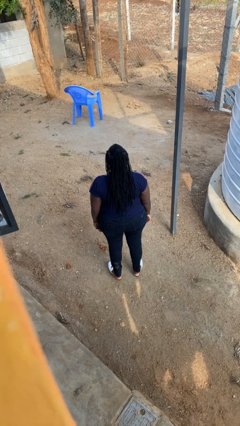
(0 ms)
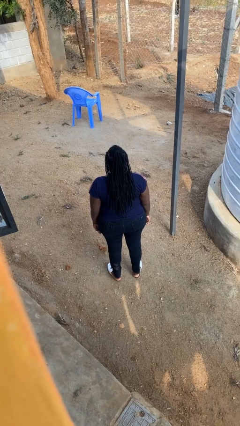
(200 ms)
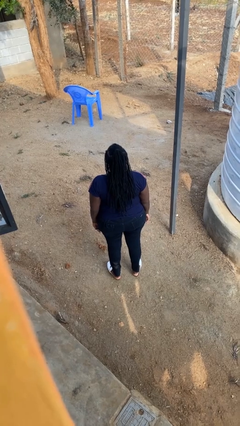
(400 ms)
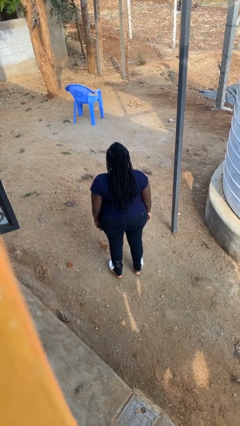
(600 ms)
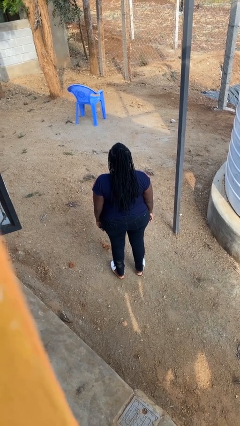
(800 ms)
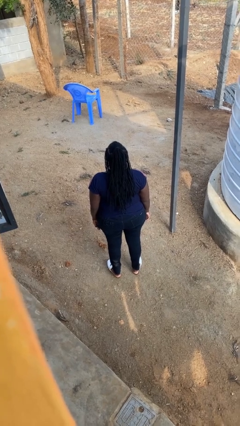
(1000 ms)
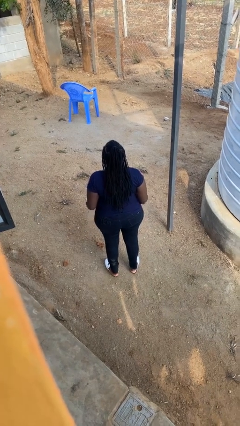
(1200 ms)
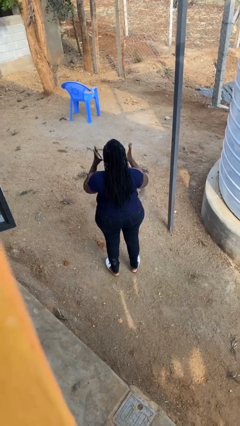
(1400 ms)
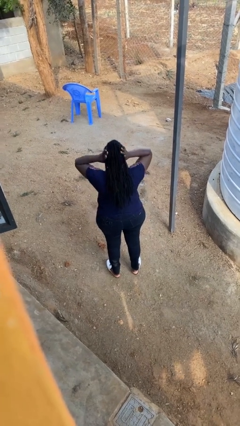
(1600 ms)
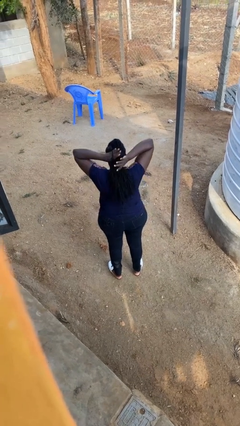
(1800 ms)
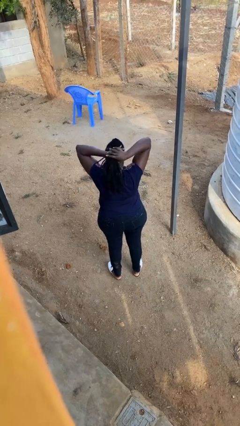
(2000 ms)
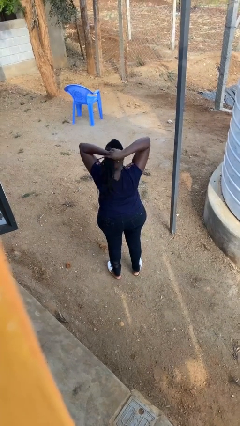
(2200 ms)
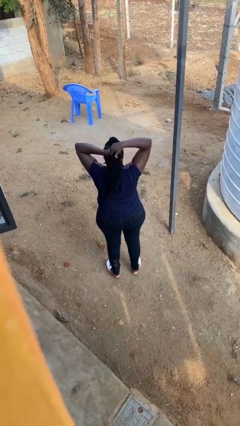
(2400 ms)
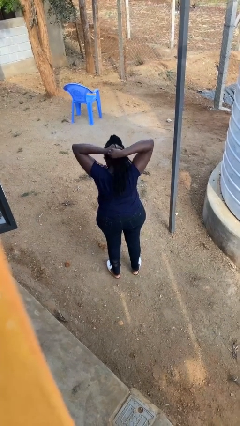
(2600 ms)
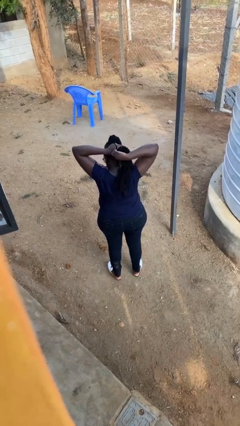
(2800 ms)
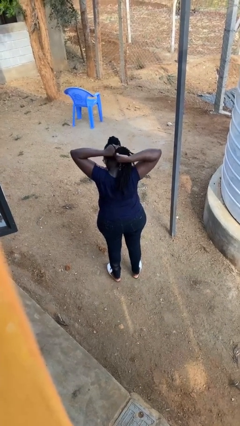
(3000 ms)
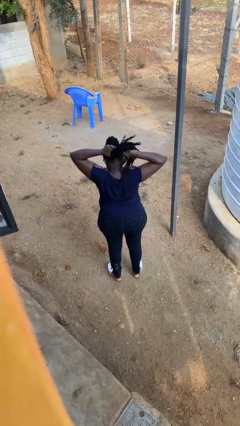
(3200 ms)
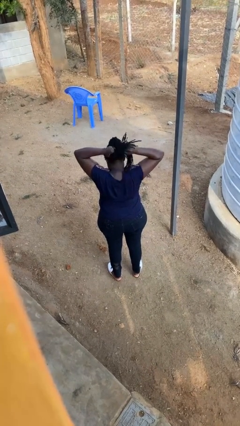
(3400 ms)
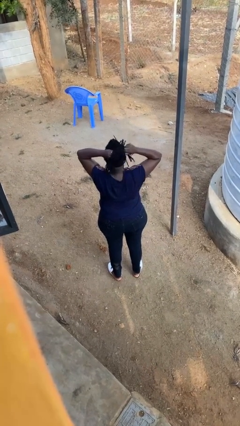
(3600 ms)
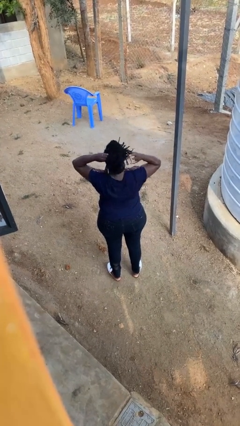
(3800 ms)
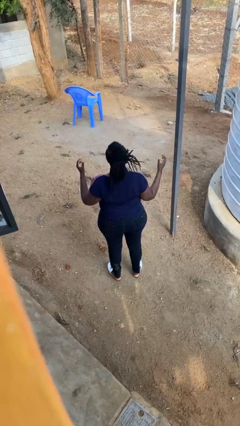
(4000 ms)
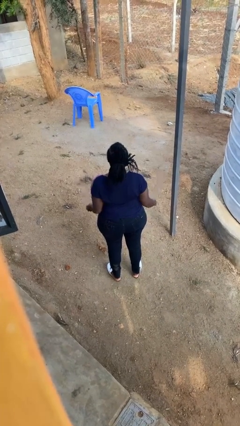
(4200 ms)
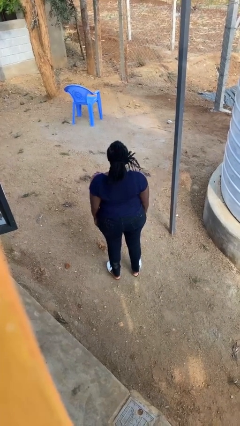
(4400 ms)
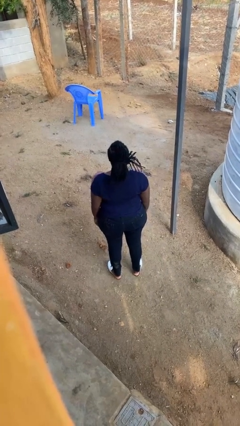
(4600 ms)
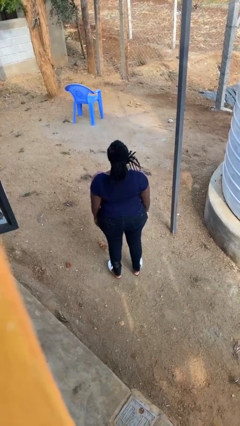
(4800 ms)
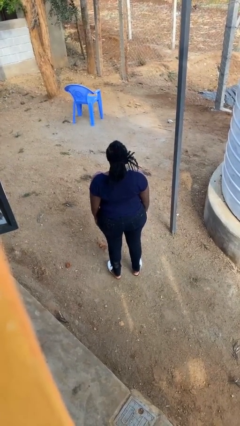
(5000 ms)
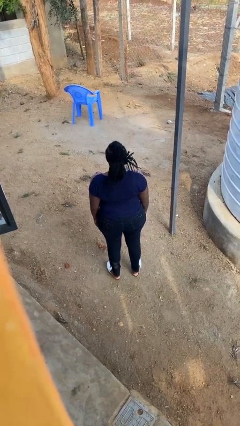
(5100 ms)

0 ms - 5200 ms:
person puts hair in ponytail

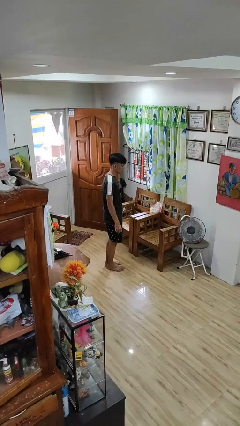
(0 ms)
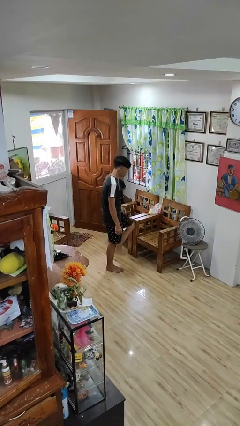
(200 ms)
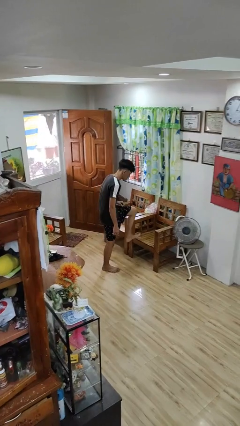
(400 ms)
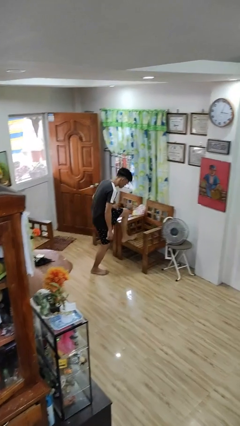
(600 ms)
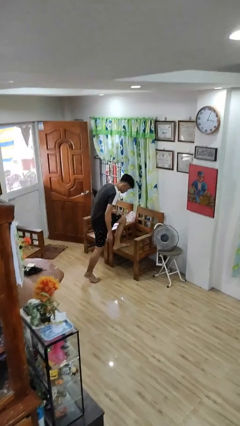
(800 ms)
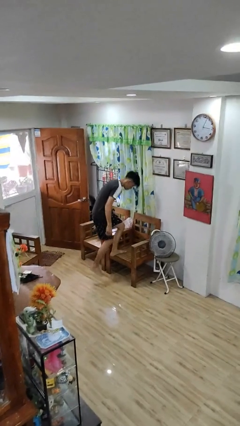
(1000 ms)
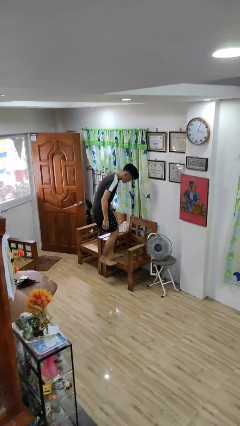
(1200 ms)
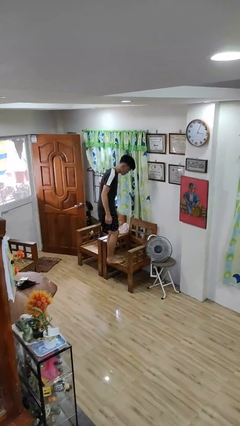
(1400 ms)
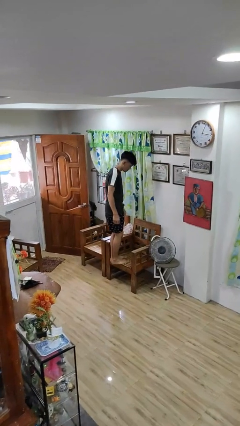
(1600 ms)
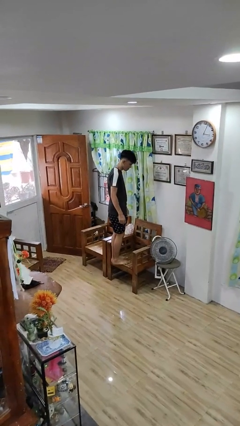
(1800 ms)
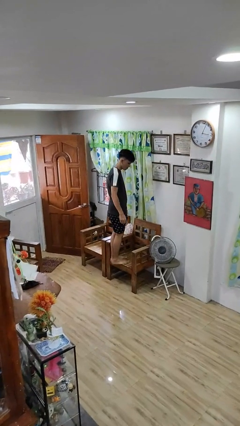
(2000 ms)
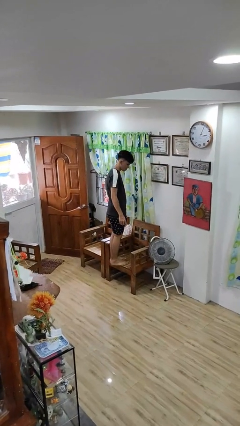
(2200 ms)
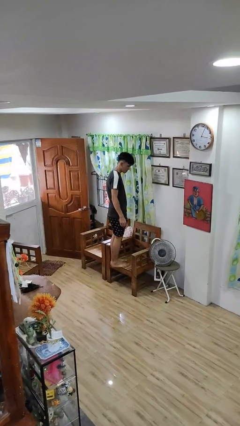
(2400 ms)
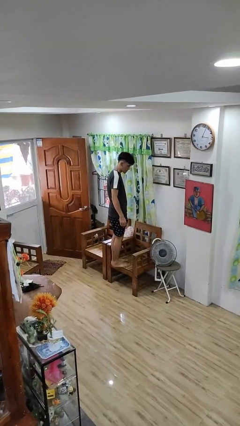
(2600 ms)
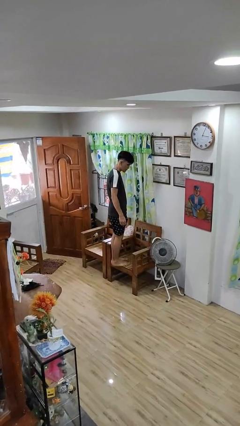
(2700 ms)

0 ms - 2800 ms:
person climbs on chair

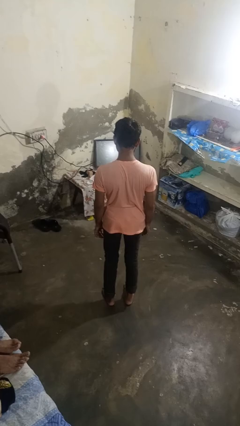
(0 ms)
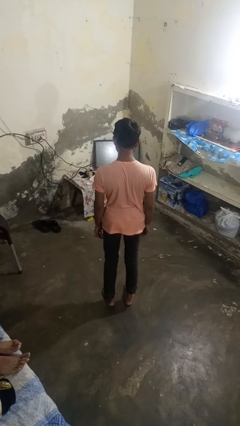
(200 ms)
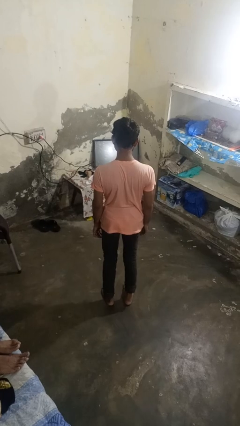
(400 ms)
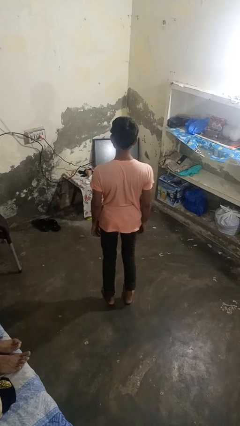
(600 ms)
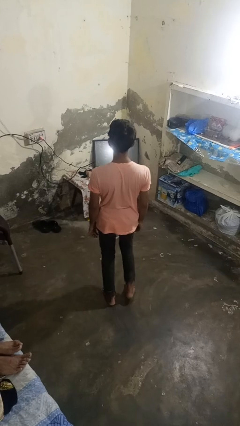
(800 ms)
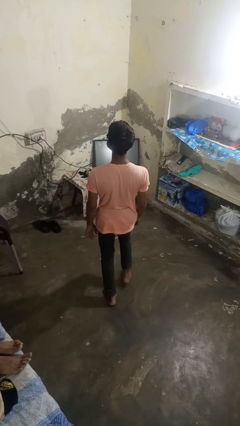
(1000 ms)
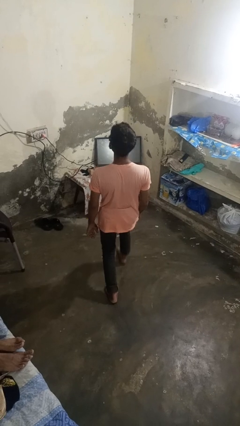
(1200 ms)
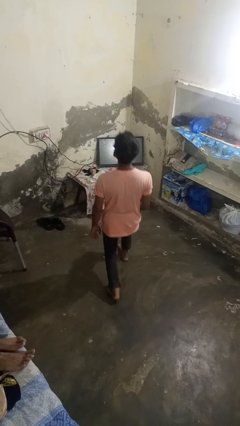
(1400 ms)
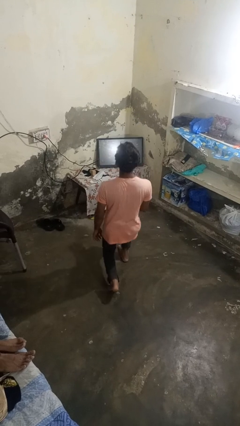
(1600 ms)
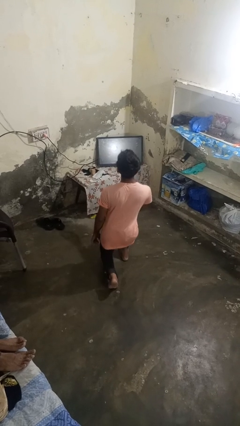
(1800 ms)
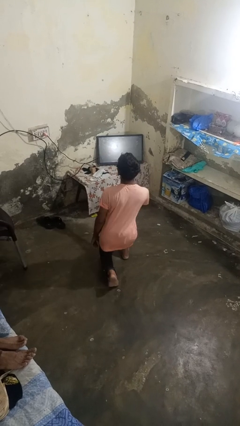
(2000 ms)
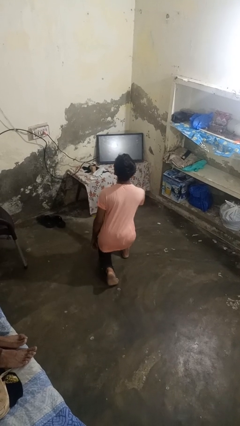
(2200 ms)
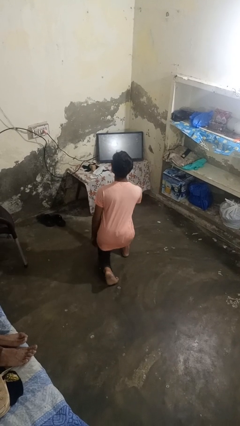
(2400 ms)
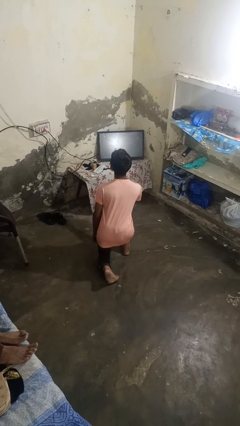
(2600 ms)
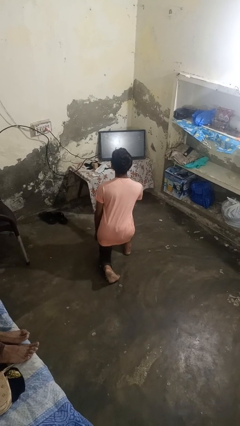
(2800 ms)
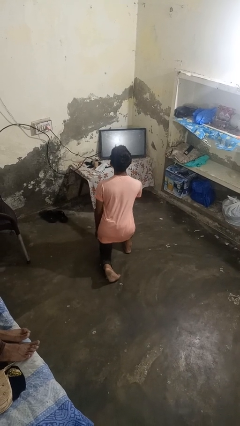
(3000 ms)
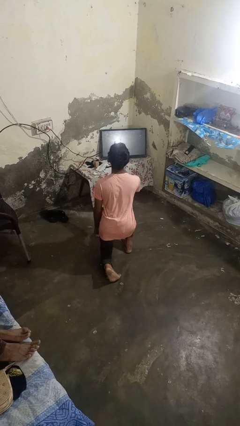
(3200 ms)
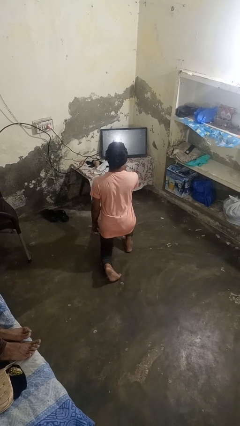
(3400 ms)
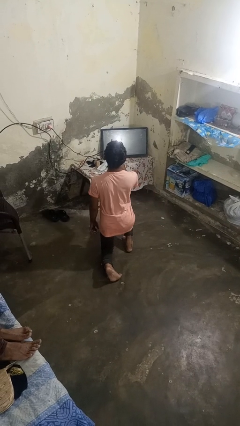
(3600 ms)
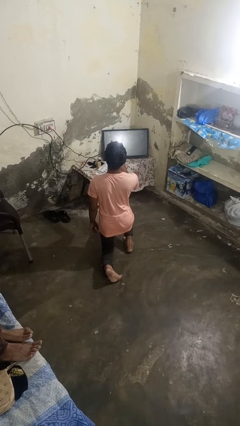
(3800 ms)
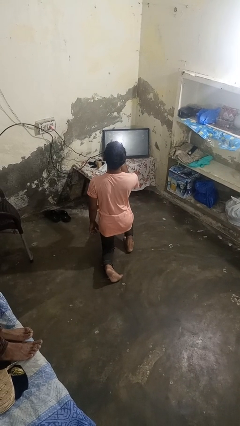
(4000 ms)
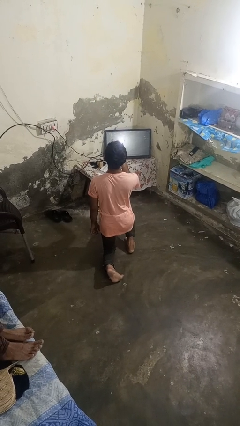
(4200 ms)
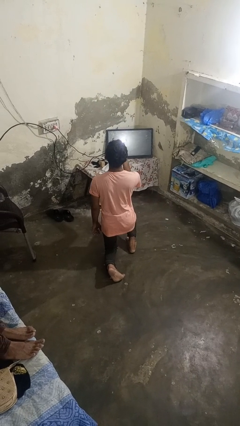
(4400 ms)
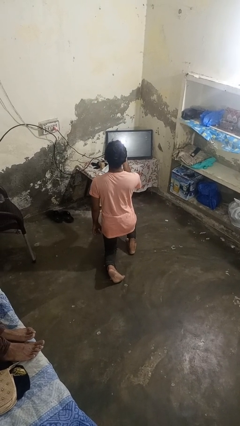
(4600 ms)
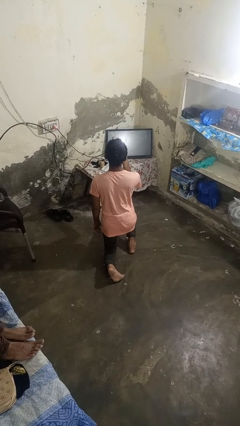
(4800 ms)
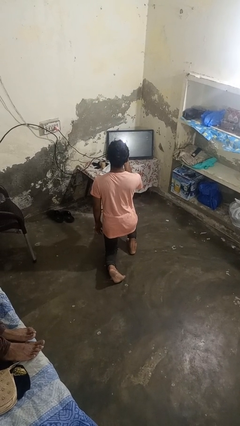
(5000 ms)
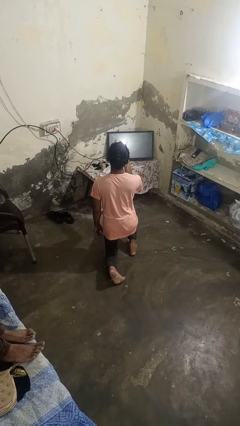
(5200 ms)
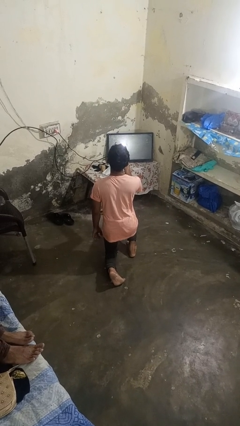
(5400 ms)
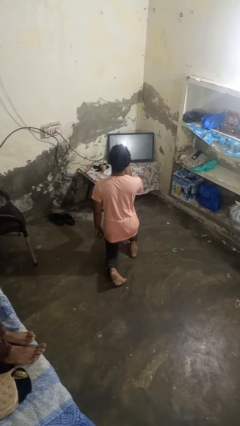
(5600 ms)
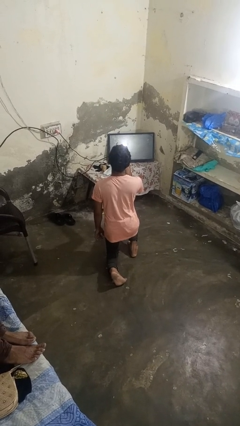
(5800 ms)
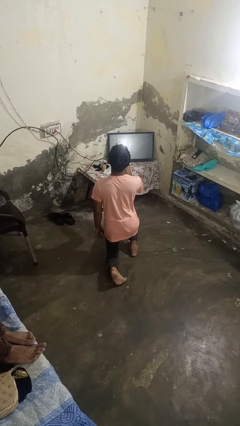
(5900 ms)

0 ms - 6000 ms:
person kneels

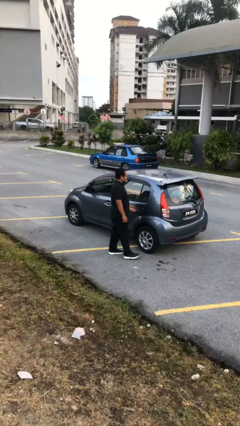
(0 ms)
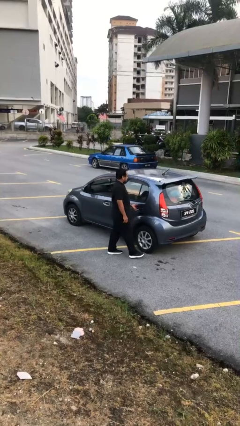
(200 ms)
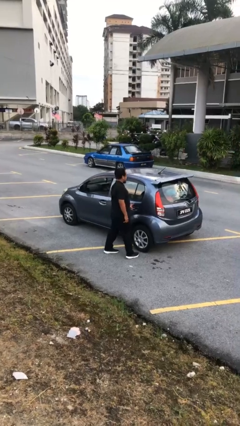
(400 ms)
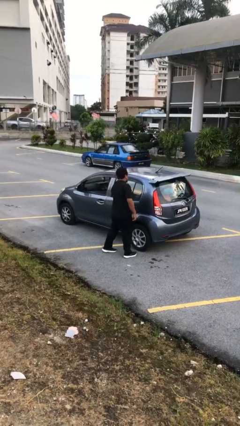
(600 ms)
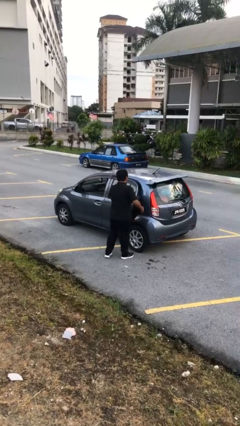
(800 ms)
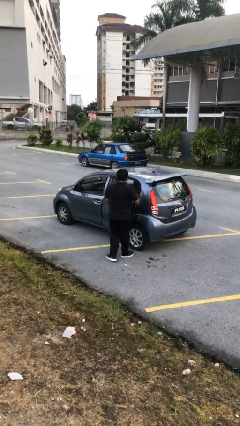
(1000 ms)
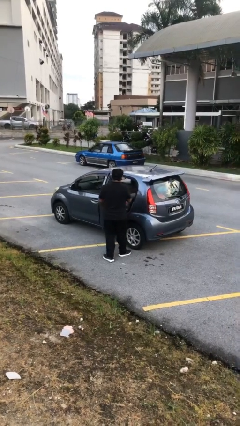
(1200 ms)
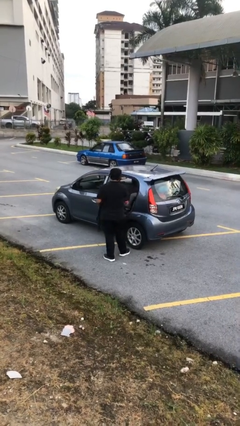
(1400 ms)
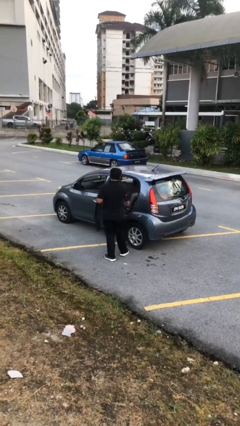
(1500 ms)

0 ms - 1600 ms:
person opens car door

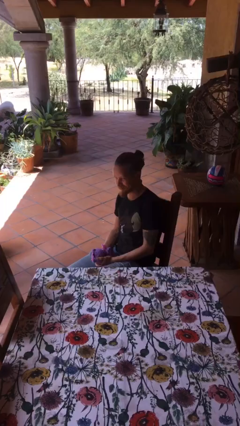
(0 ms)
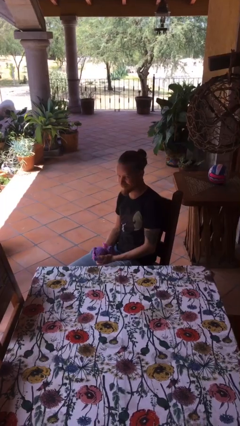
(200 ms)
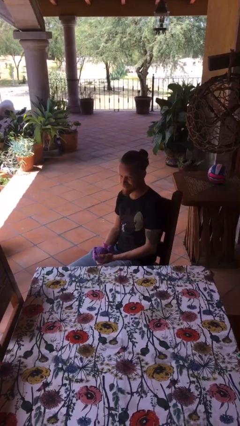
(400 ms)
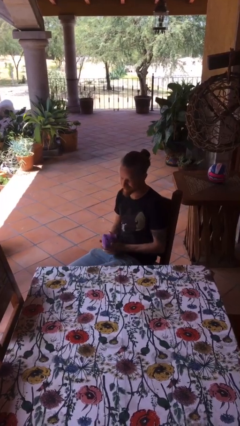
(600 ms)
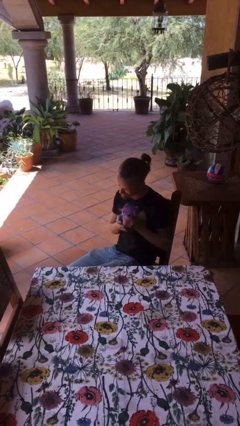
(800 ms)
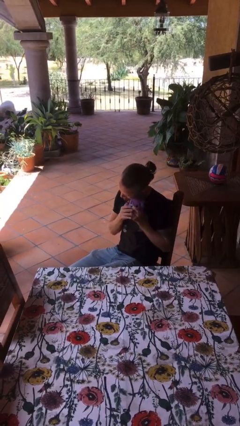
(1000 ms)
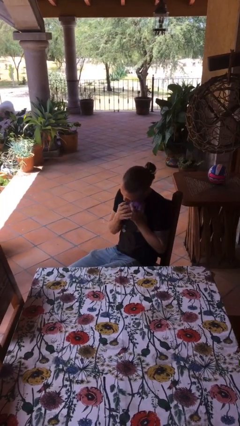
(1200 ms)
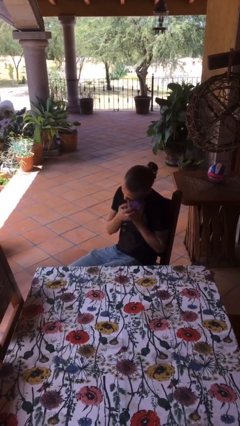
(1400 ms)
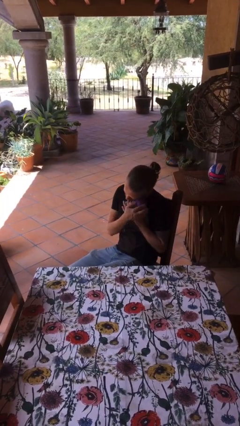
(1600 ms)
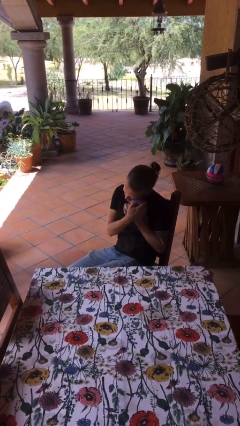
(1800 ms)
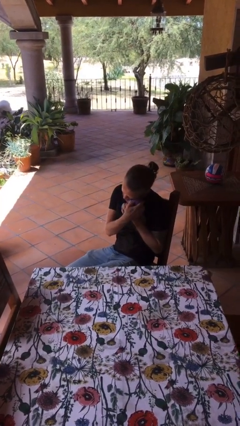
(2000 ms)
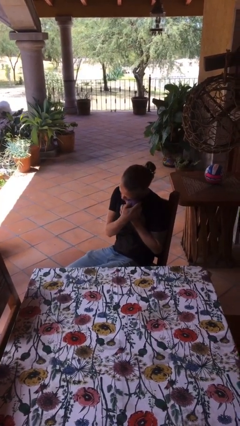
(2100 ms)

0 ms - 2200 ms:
person hugs stuffed animal

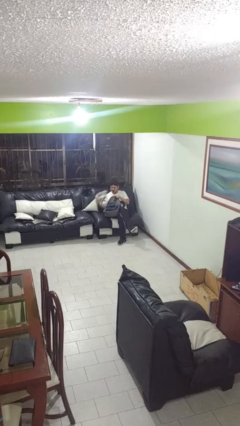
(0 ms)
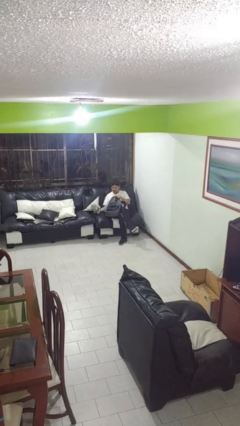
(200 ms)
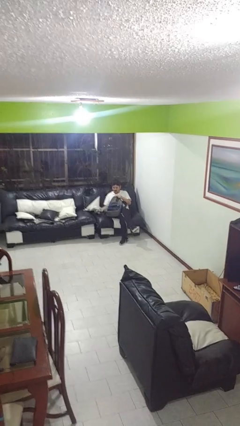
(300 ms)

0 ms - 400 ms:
person takes object from backpack
